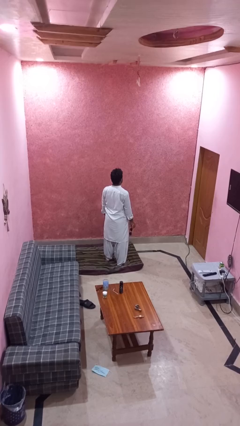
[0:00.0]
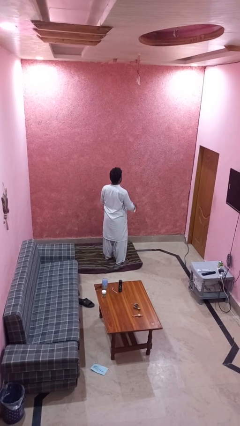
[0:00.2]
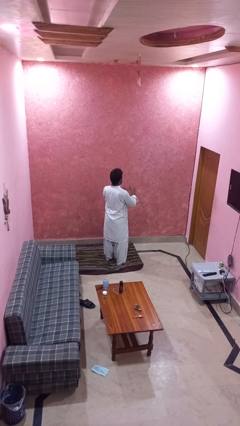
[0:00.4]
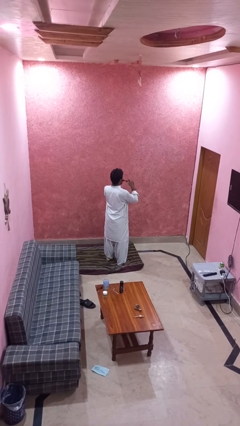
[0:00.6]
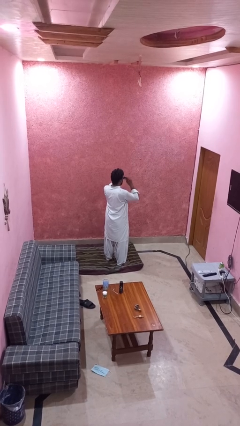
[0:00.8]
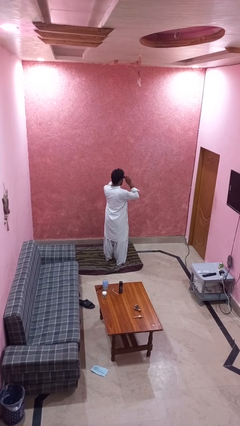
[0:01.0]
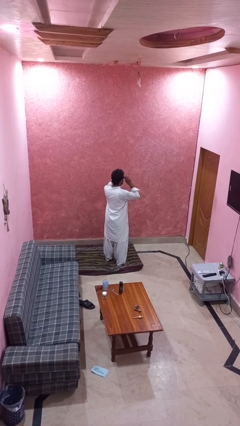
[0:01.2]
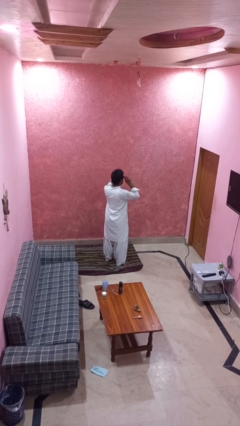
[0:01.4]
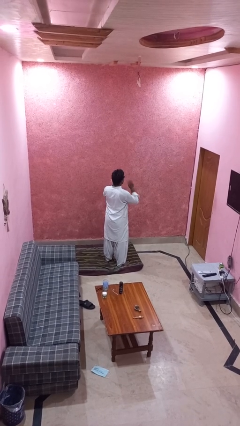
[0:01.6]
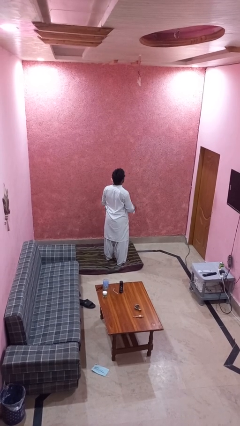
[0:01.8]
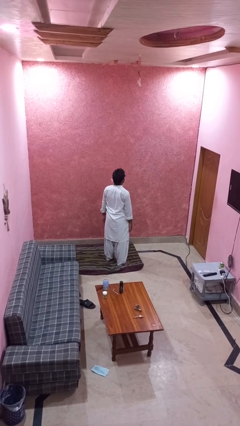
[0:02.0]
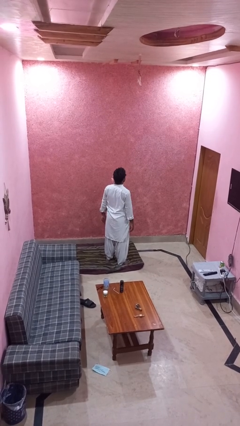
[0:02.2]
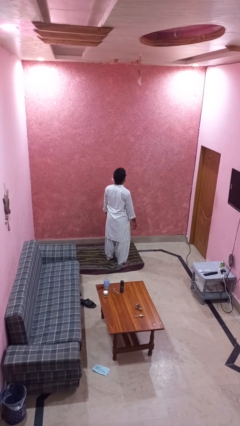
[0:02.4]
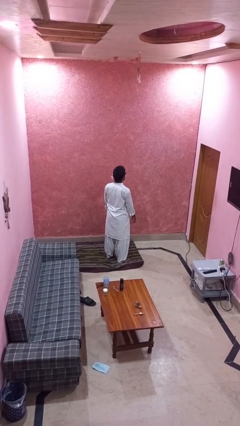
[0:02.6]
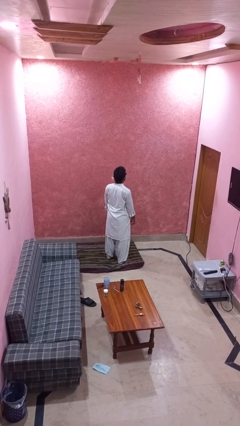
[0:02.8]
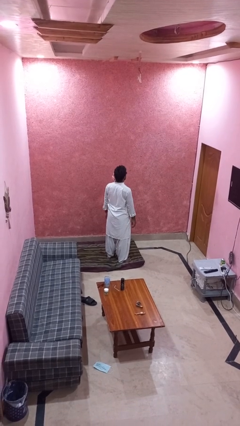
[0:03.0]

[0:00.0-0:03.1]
person puts on sunglasses

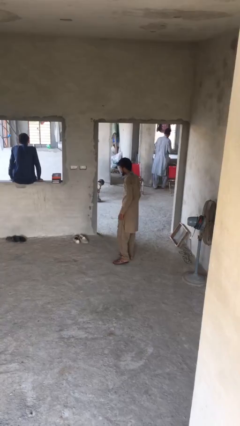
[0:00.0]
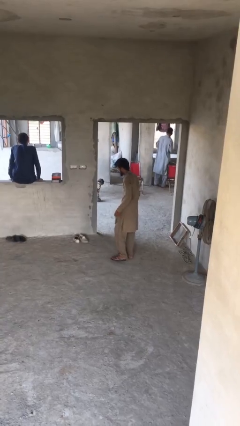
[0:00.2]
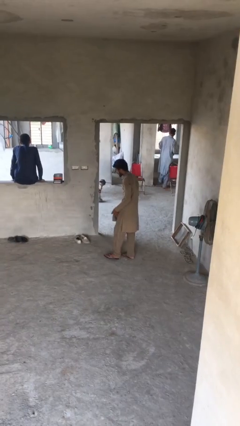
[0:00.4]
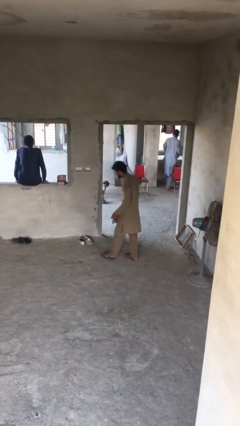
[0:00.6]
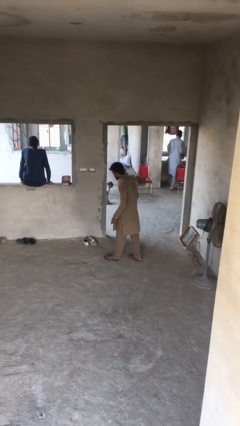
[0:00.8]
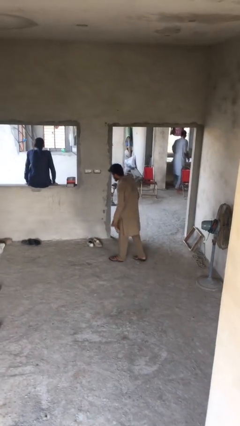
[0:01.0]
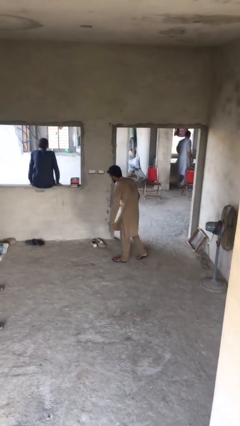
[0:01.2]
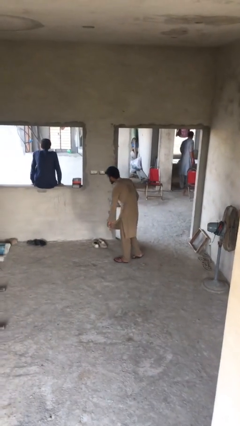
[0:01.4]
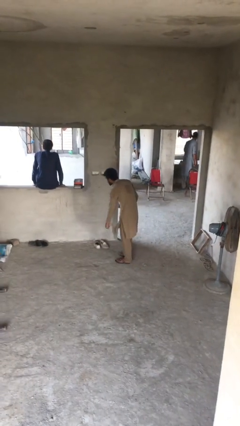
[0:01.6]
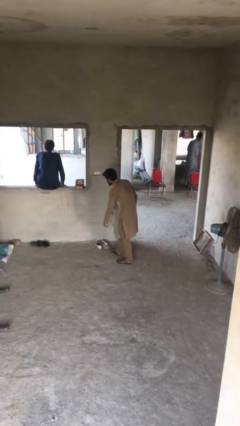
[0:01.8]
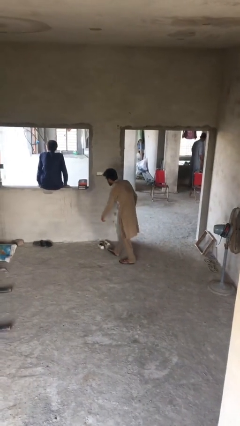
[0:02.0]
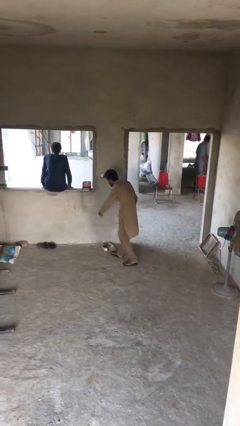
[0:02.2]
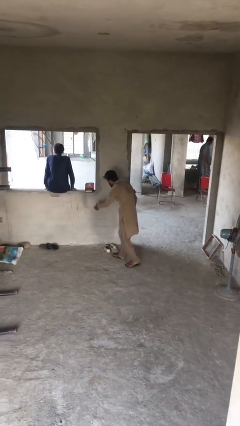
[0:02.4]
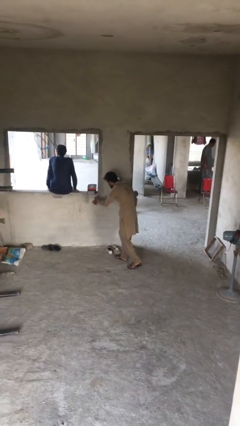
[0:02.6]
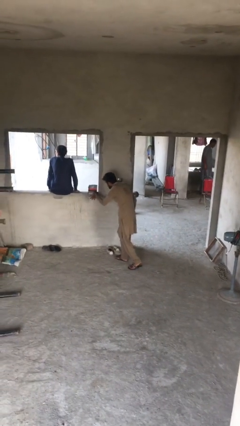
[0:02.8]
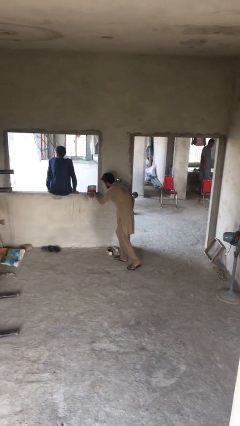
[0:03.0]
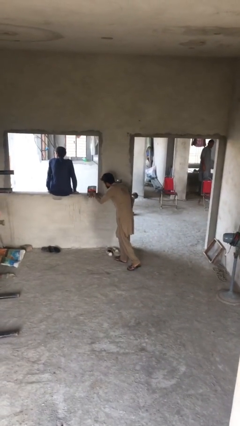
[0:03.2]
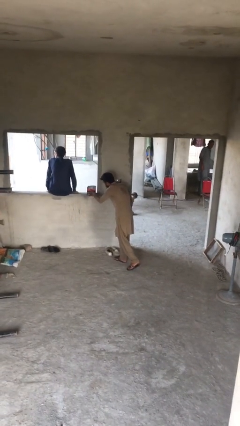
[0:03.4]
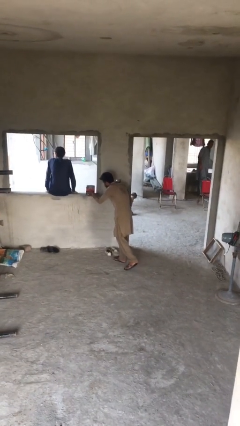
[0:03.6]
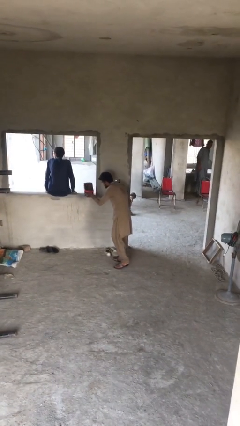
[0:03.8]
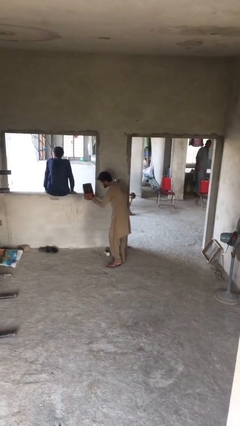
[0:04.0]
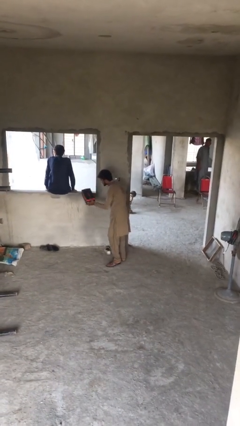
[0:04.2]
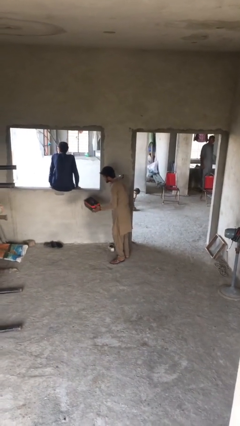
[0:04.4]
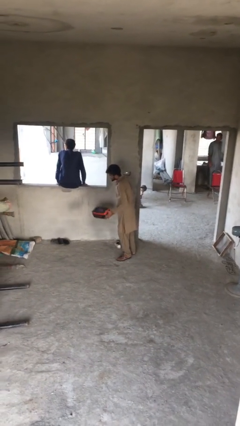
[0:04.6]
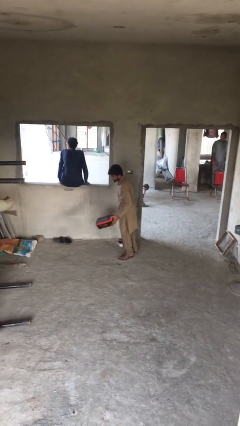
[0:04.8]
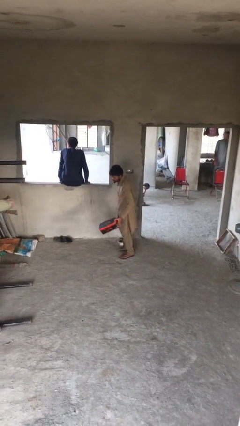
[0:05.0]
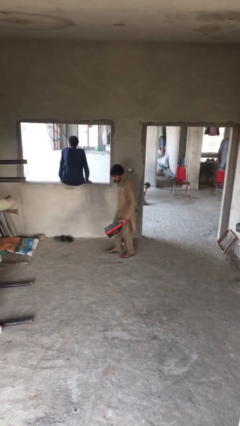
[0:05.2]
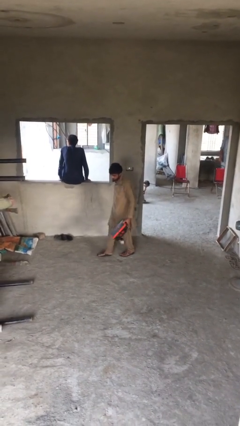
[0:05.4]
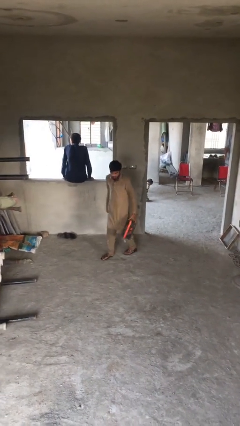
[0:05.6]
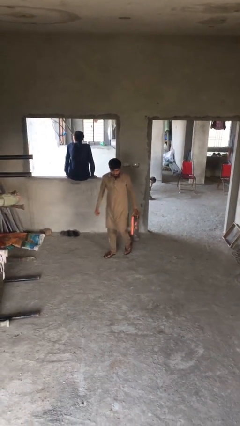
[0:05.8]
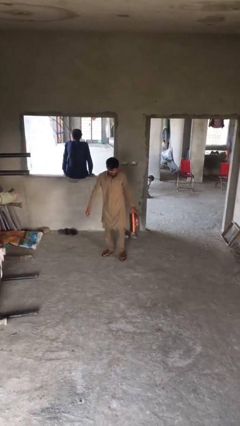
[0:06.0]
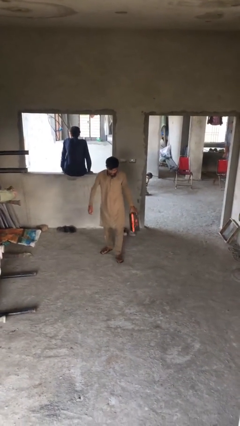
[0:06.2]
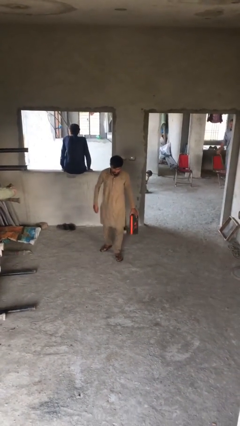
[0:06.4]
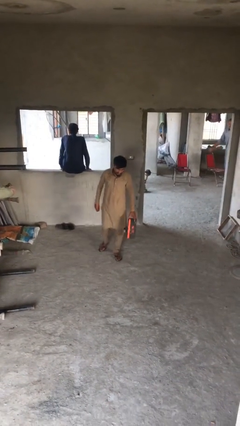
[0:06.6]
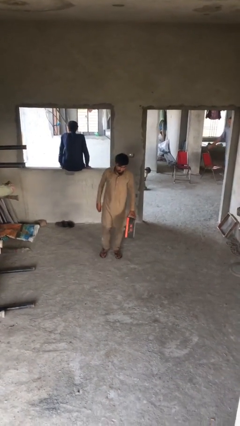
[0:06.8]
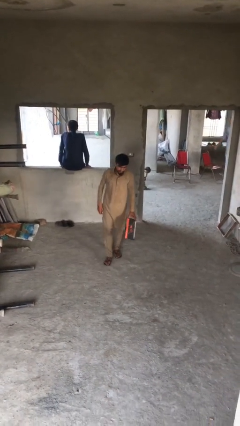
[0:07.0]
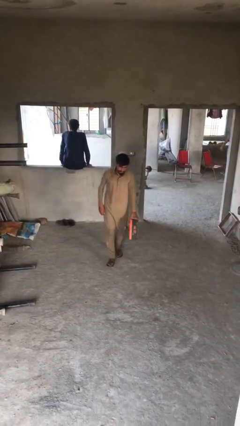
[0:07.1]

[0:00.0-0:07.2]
person steals object from person

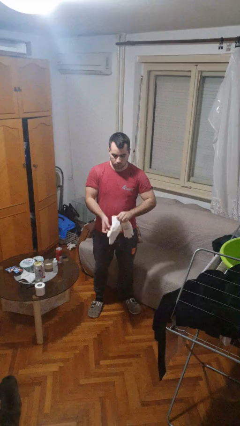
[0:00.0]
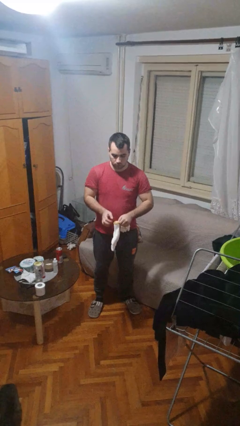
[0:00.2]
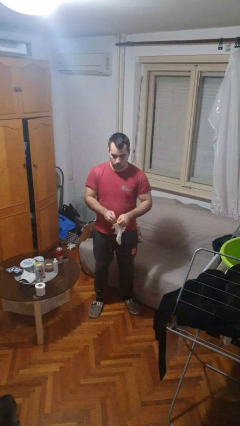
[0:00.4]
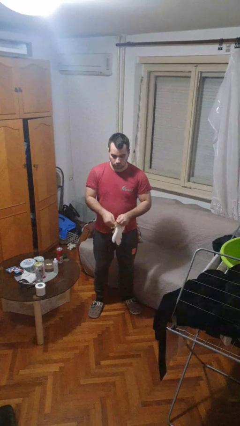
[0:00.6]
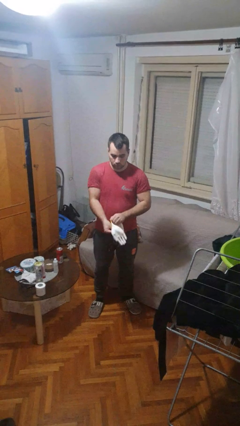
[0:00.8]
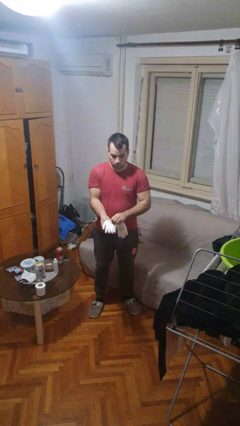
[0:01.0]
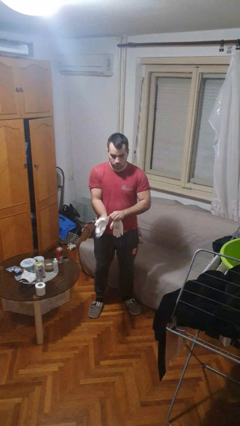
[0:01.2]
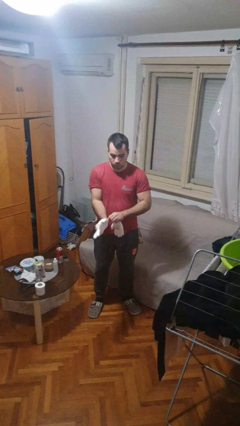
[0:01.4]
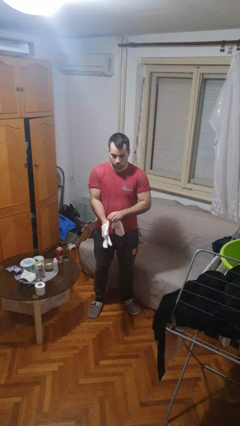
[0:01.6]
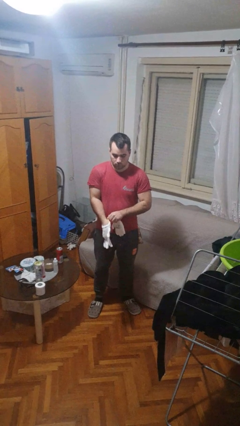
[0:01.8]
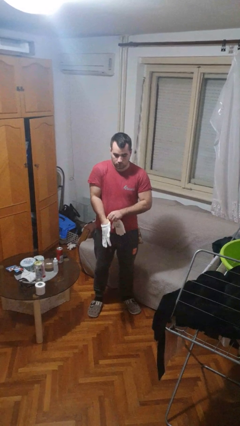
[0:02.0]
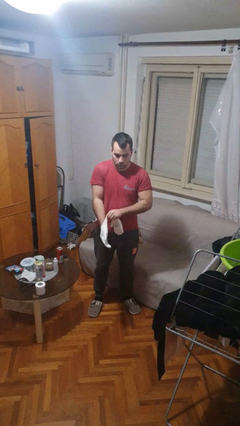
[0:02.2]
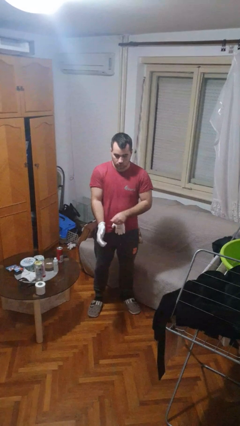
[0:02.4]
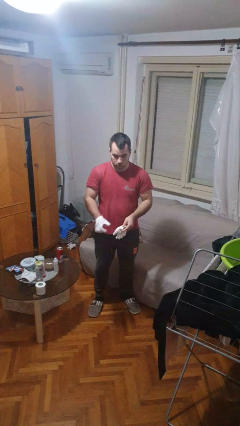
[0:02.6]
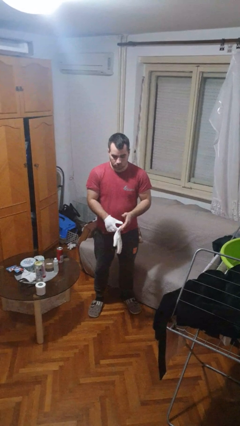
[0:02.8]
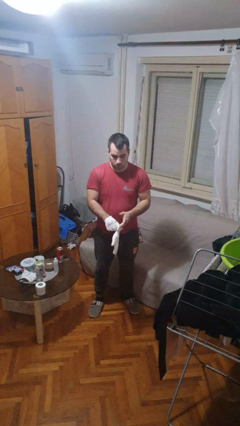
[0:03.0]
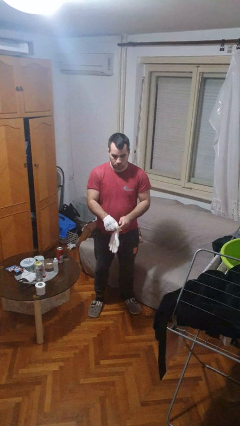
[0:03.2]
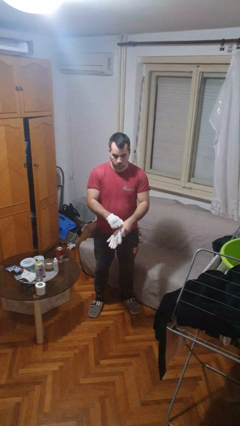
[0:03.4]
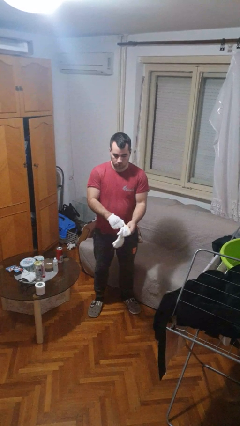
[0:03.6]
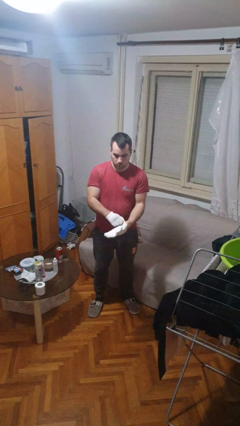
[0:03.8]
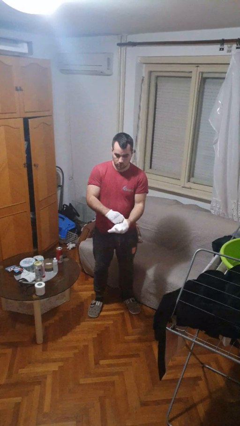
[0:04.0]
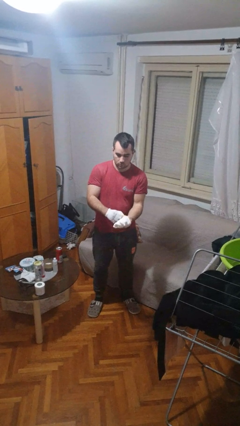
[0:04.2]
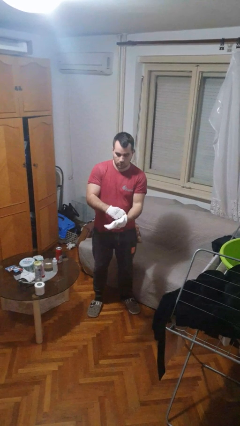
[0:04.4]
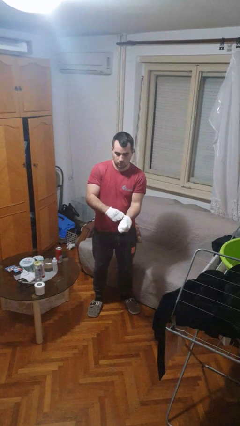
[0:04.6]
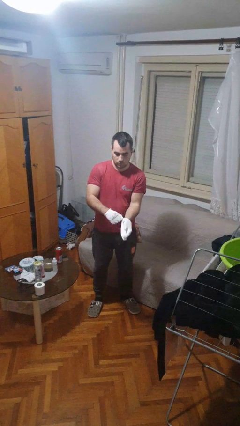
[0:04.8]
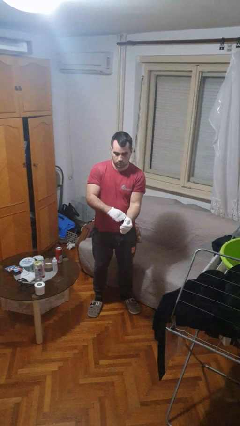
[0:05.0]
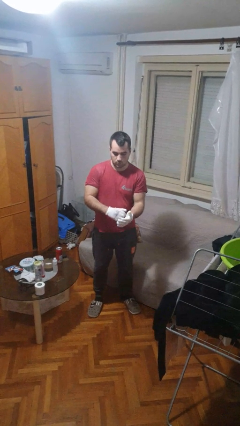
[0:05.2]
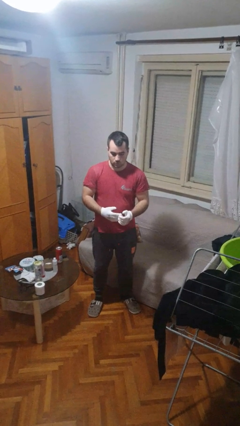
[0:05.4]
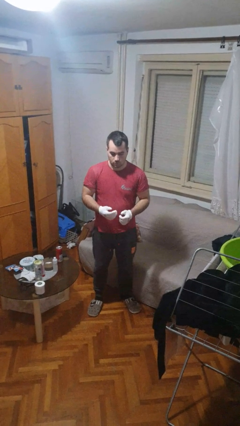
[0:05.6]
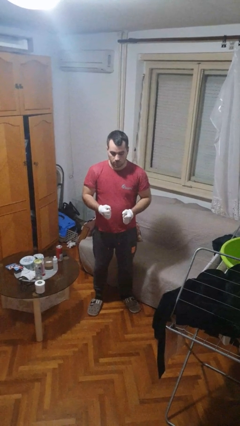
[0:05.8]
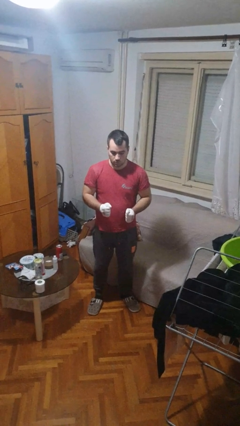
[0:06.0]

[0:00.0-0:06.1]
person puts on gloves

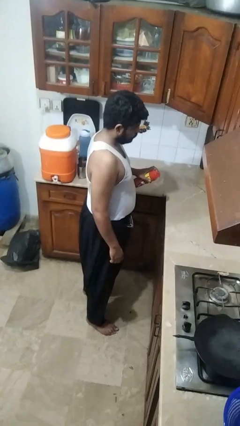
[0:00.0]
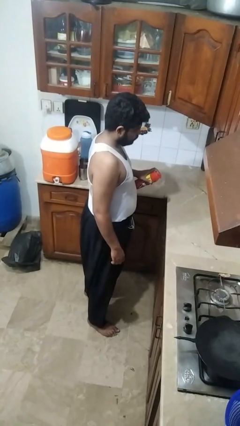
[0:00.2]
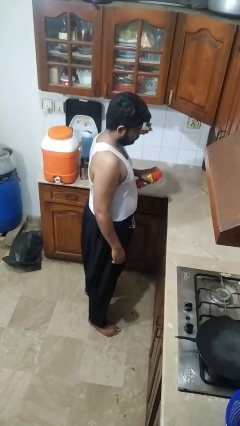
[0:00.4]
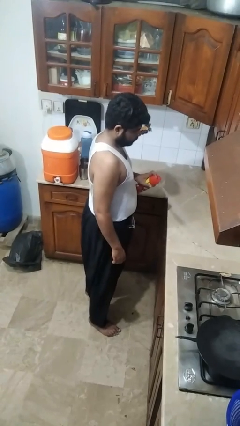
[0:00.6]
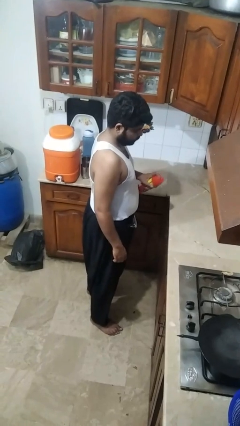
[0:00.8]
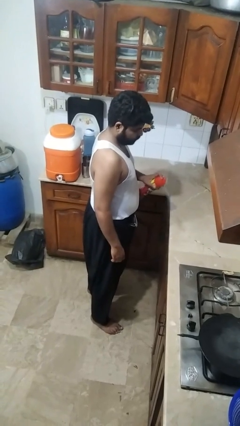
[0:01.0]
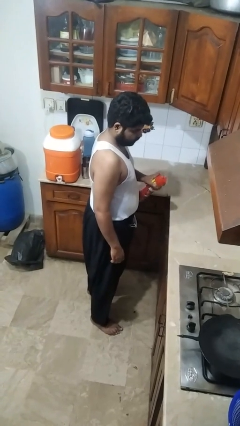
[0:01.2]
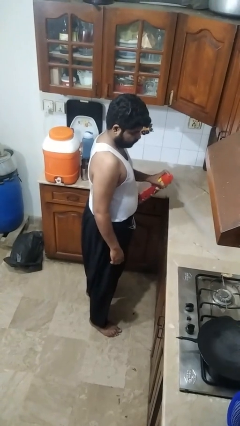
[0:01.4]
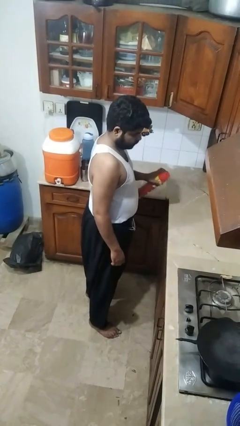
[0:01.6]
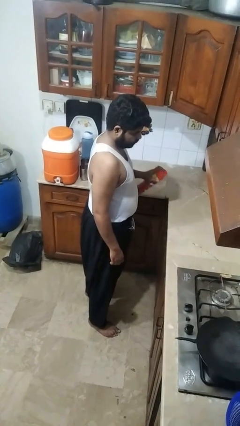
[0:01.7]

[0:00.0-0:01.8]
person sprays from bottle
